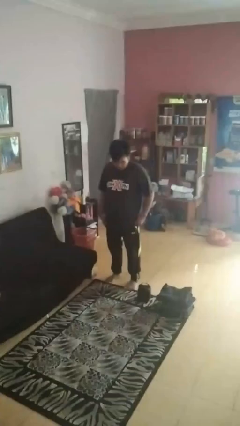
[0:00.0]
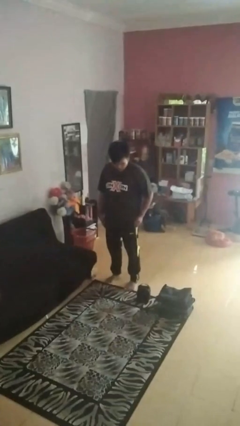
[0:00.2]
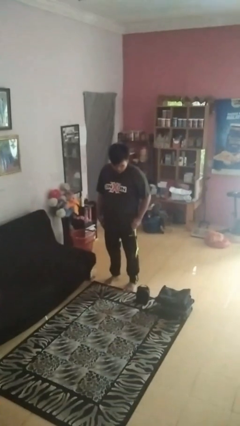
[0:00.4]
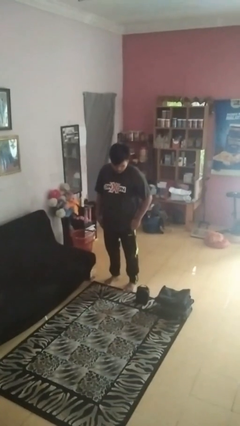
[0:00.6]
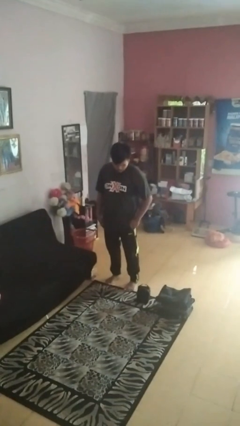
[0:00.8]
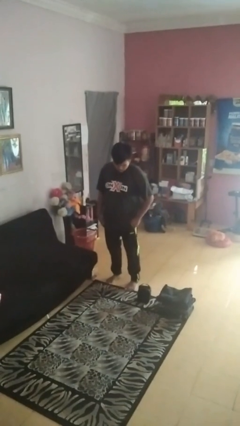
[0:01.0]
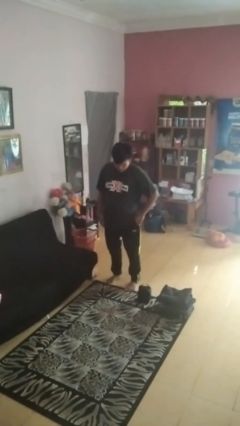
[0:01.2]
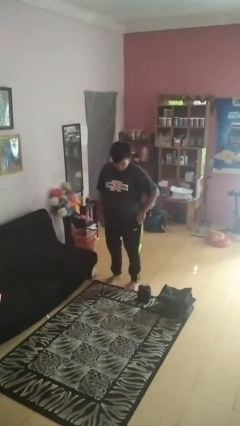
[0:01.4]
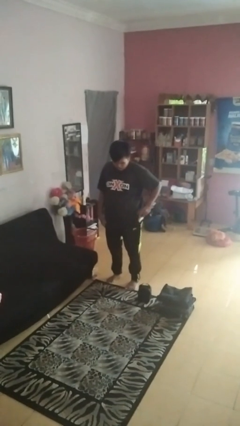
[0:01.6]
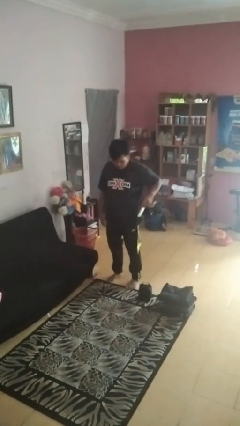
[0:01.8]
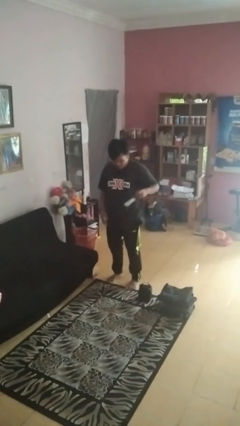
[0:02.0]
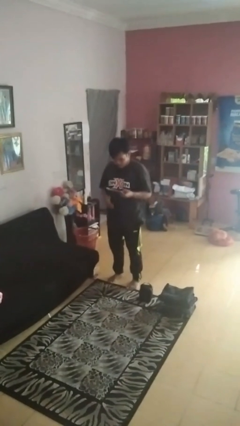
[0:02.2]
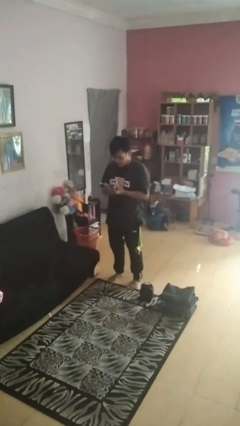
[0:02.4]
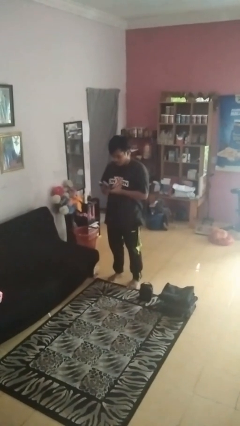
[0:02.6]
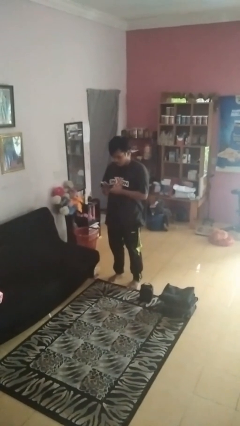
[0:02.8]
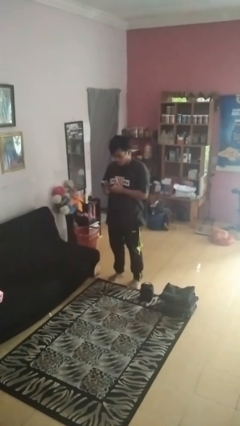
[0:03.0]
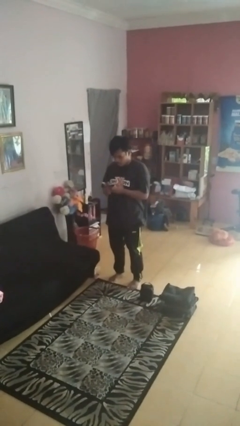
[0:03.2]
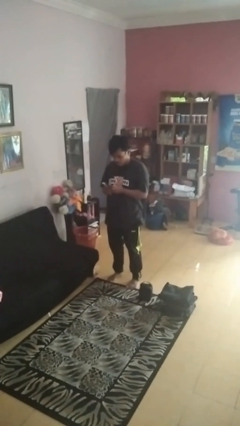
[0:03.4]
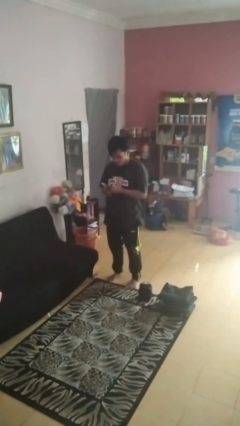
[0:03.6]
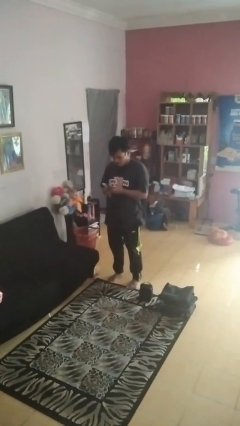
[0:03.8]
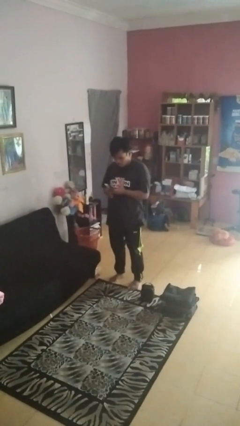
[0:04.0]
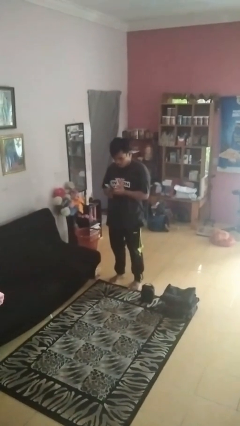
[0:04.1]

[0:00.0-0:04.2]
person takes phone from pocket

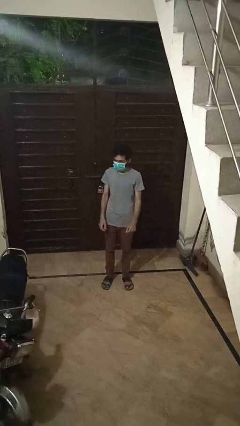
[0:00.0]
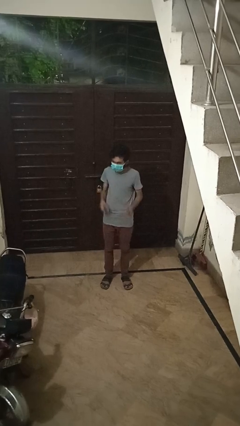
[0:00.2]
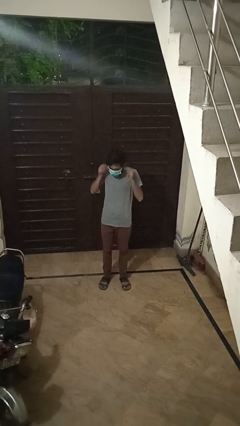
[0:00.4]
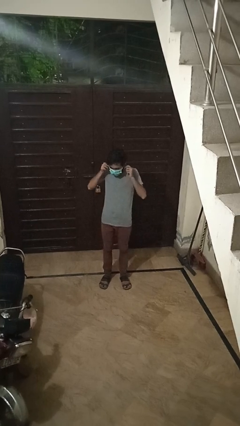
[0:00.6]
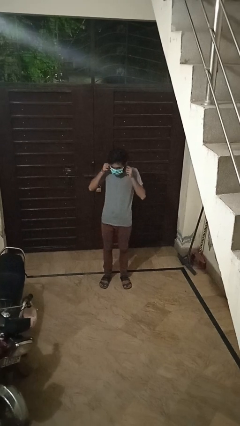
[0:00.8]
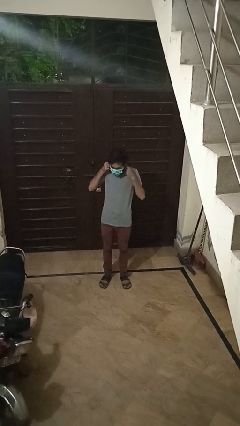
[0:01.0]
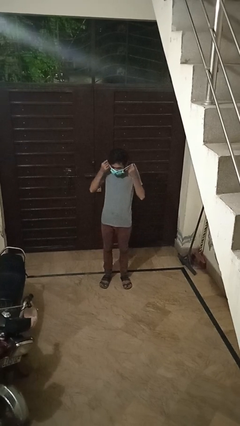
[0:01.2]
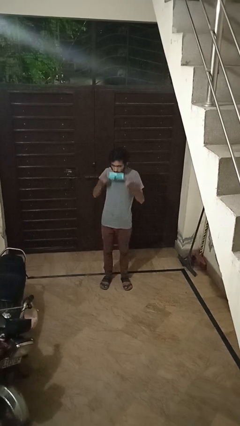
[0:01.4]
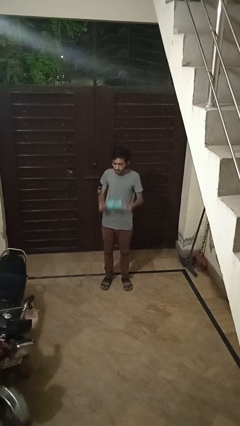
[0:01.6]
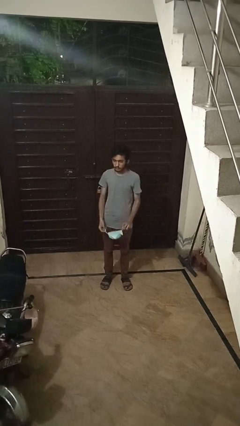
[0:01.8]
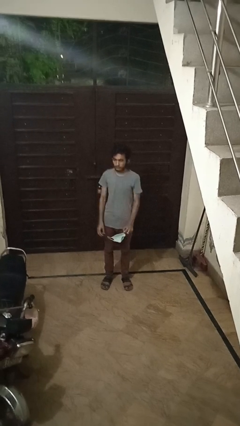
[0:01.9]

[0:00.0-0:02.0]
person takes off facemask

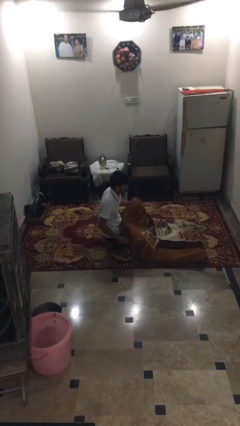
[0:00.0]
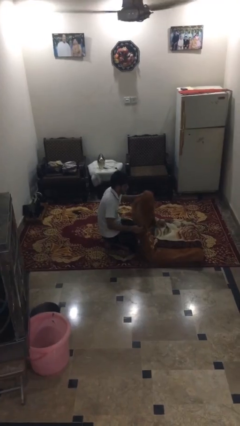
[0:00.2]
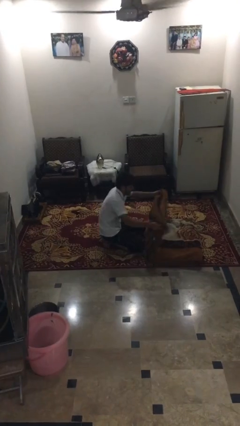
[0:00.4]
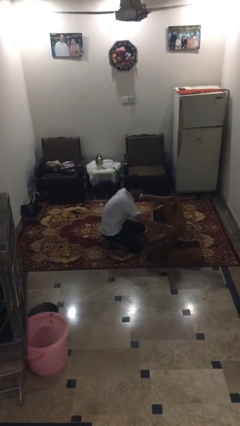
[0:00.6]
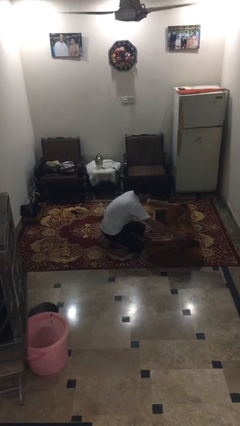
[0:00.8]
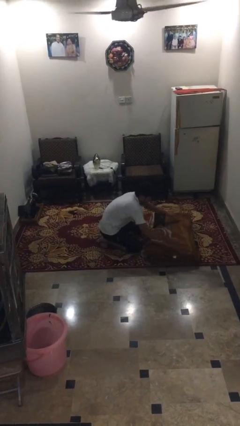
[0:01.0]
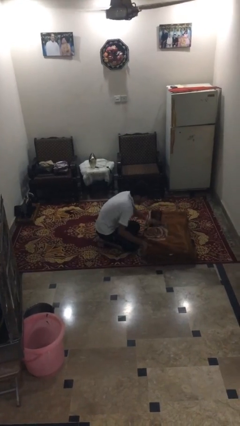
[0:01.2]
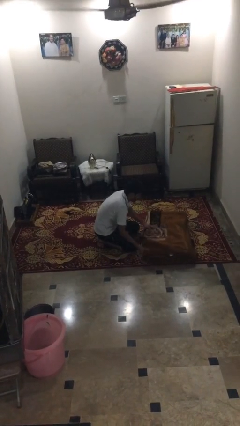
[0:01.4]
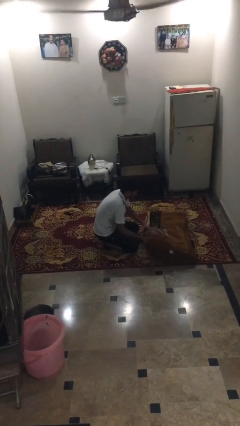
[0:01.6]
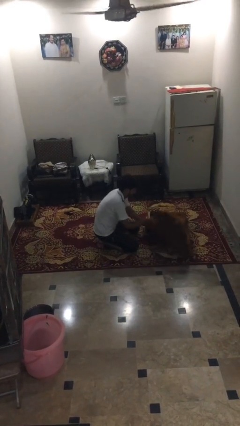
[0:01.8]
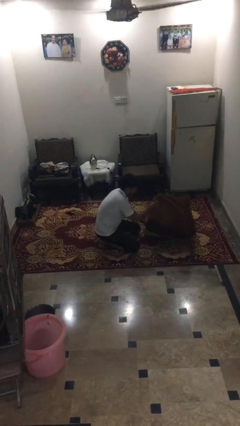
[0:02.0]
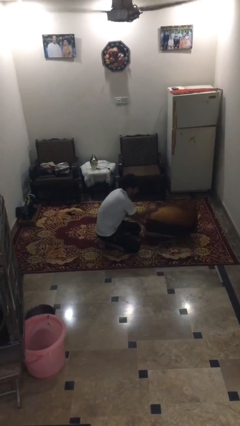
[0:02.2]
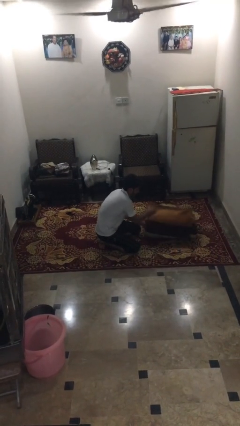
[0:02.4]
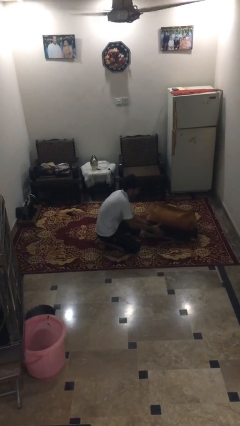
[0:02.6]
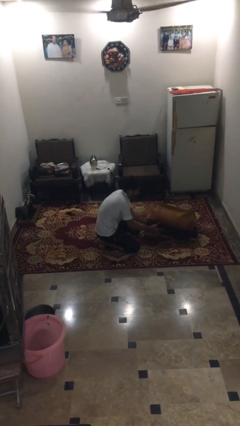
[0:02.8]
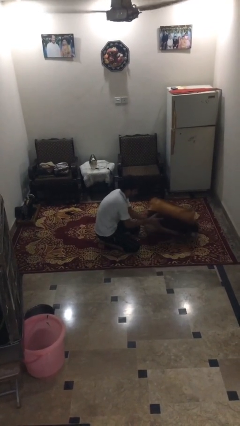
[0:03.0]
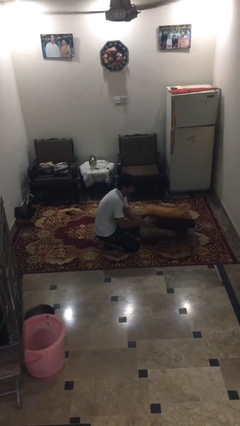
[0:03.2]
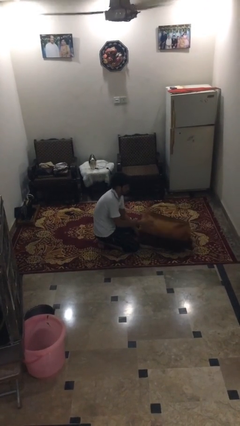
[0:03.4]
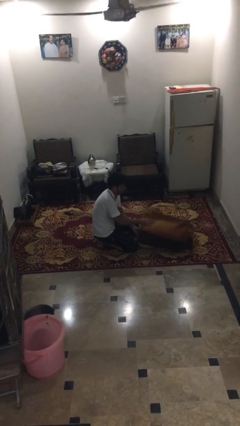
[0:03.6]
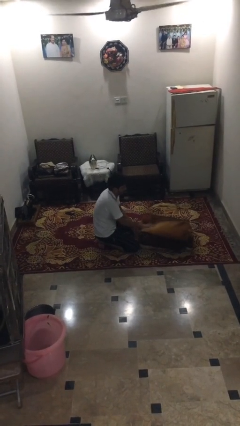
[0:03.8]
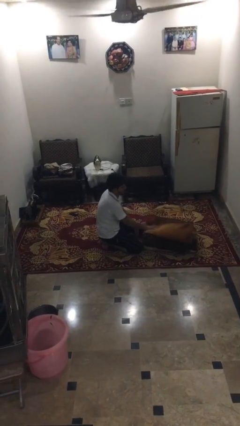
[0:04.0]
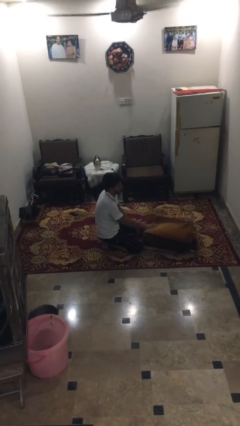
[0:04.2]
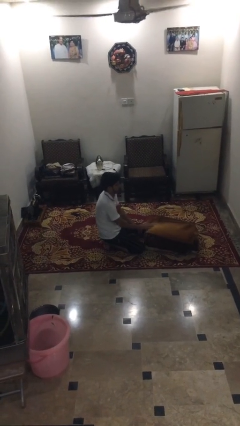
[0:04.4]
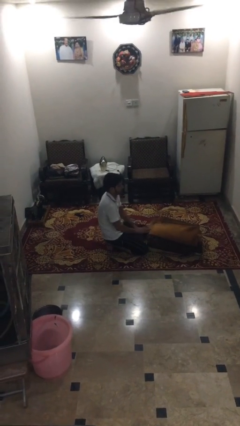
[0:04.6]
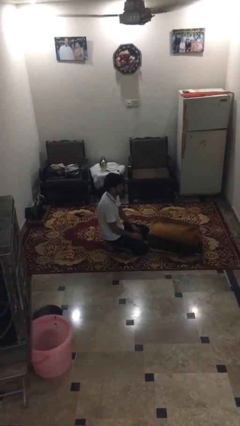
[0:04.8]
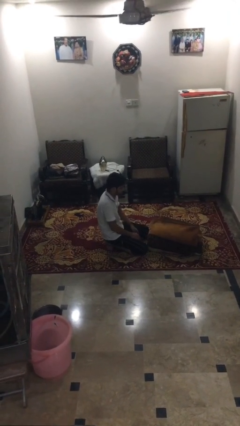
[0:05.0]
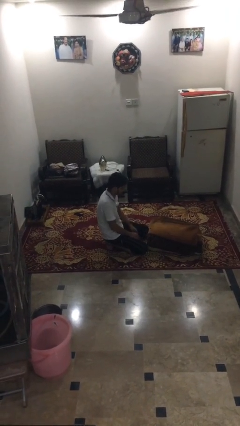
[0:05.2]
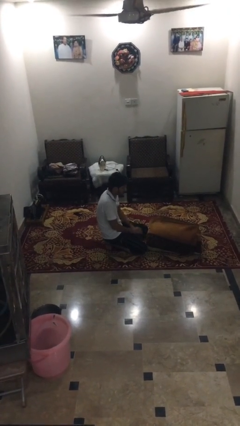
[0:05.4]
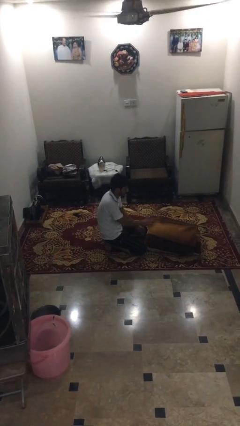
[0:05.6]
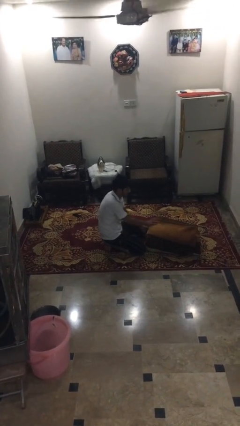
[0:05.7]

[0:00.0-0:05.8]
person folds blanket

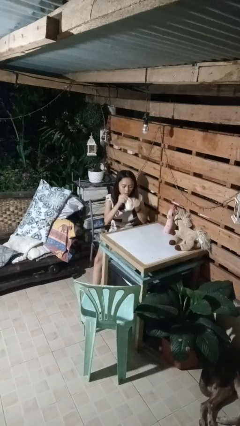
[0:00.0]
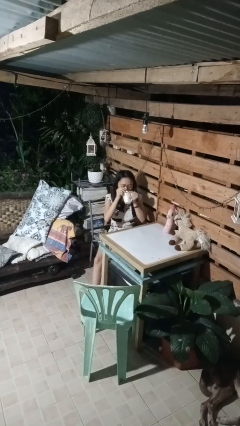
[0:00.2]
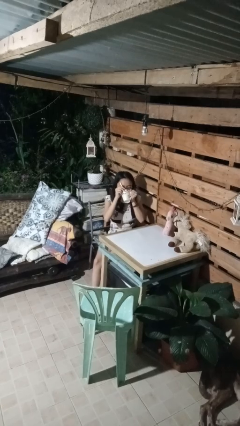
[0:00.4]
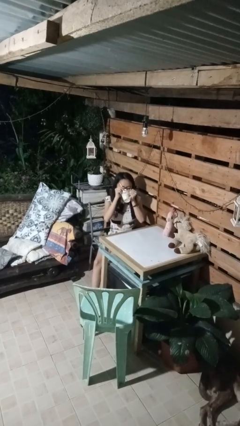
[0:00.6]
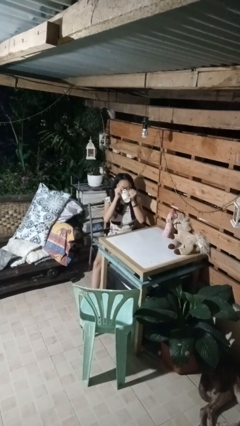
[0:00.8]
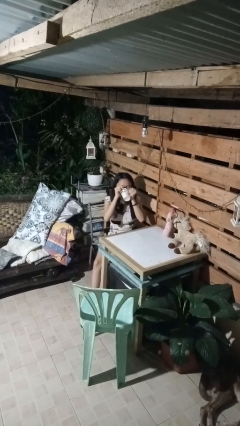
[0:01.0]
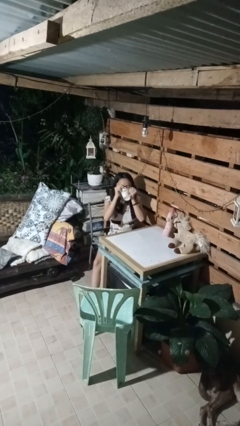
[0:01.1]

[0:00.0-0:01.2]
person drinks from mug

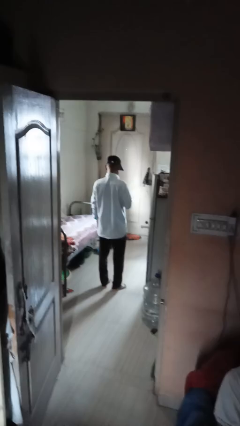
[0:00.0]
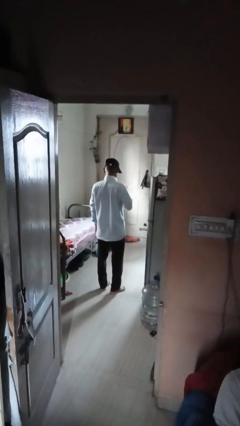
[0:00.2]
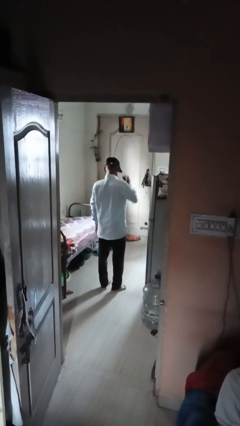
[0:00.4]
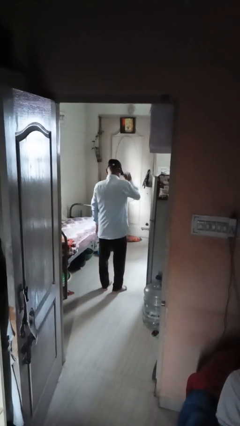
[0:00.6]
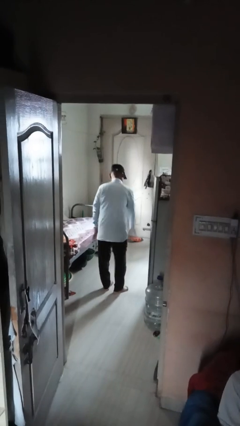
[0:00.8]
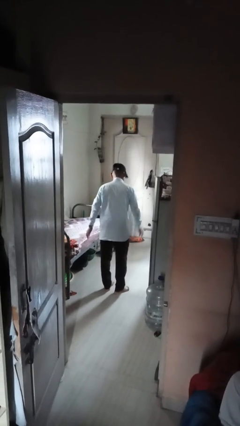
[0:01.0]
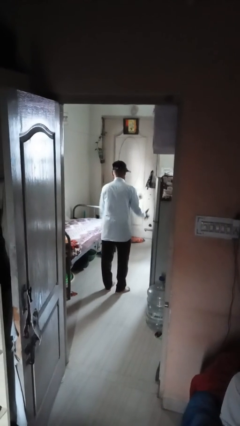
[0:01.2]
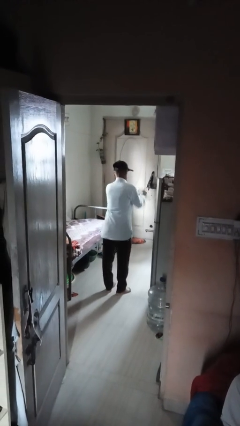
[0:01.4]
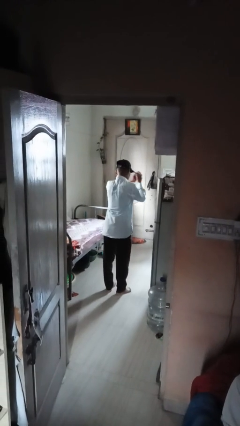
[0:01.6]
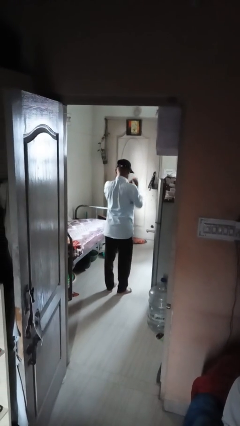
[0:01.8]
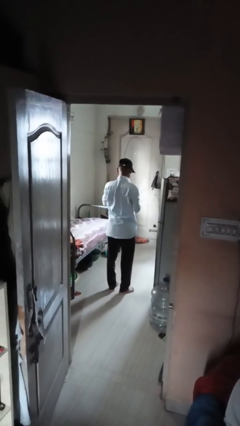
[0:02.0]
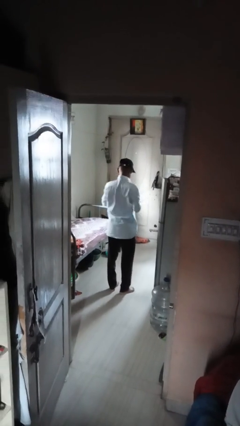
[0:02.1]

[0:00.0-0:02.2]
person bounces ball on floor

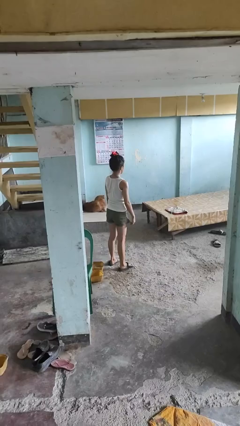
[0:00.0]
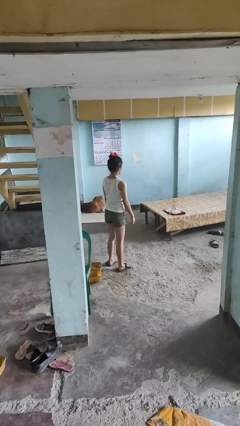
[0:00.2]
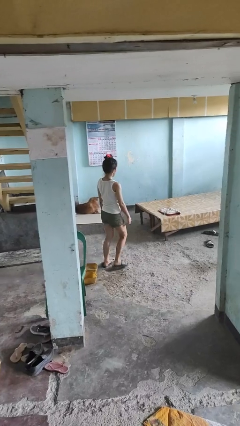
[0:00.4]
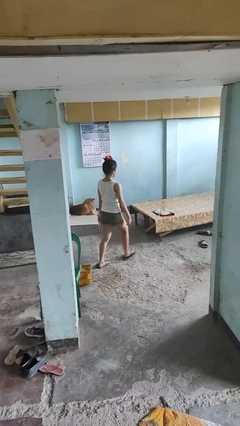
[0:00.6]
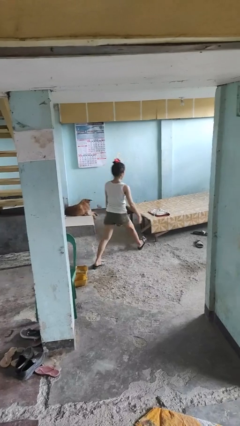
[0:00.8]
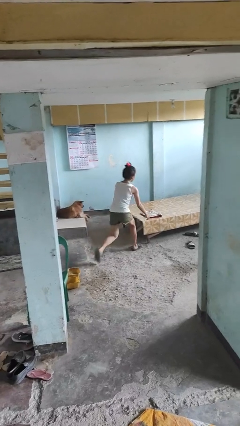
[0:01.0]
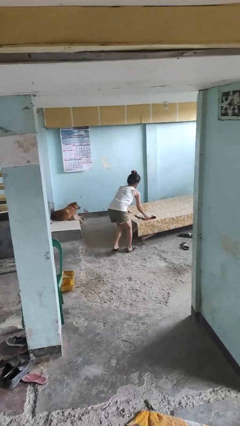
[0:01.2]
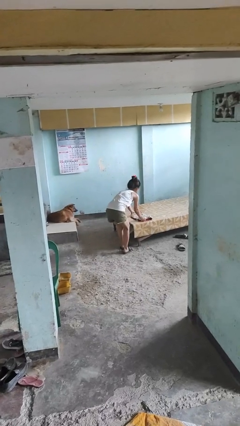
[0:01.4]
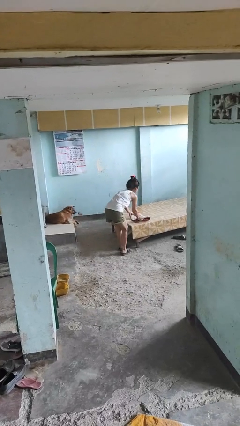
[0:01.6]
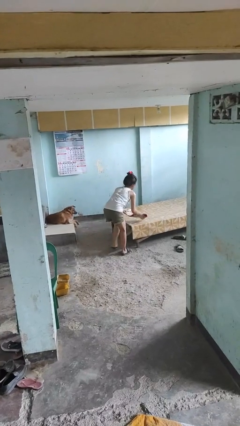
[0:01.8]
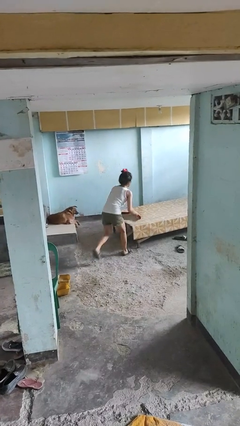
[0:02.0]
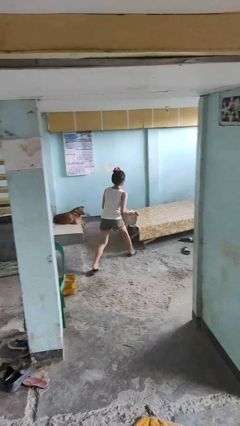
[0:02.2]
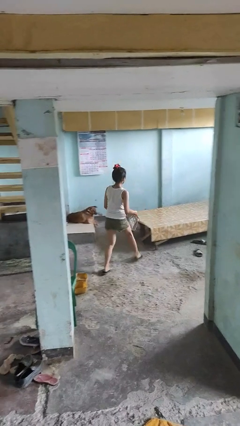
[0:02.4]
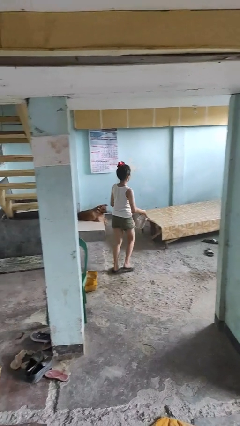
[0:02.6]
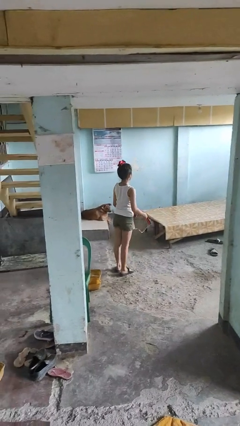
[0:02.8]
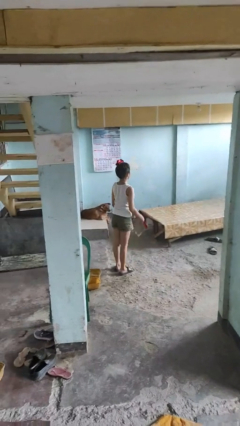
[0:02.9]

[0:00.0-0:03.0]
person picks up object from table
